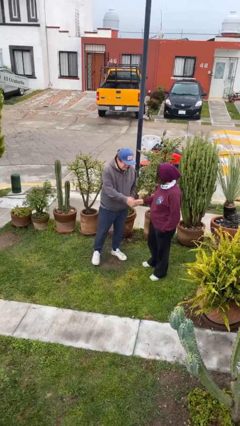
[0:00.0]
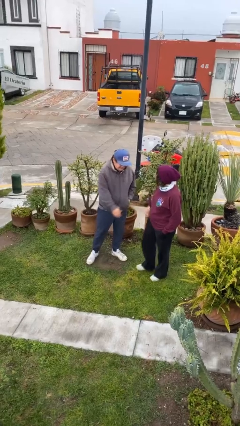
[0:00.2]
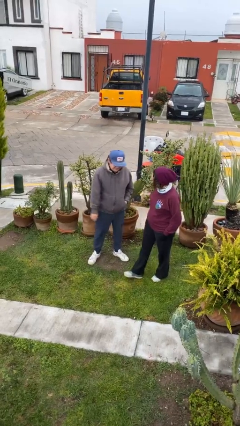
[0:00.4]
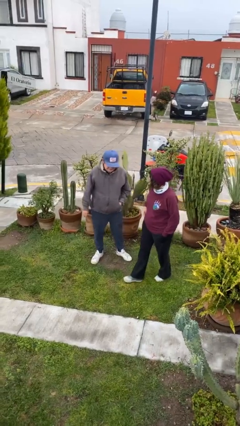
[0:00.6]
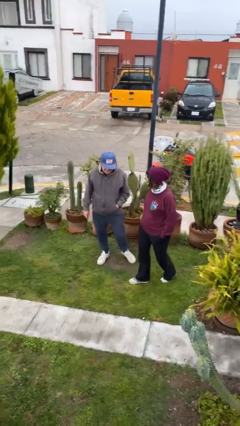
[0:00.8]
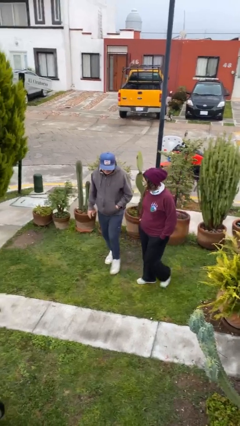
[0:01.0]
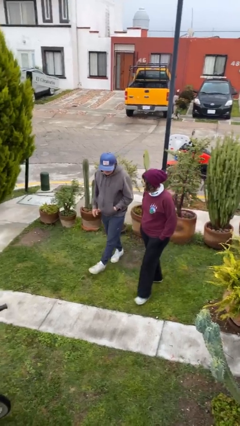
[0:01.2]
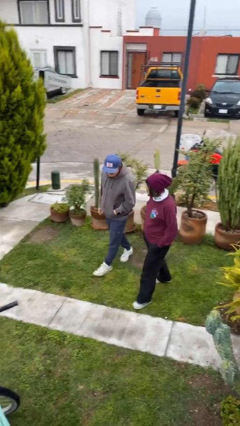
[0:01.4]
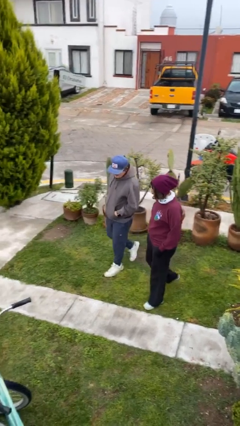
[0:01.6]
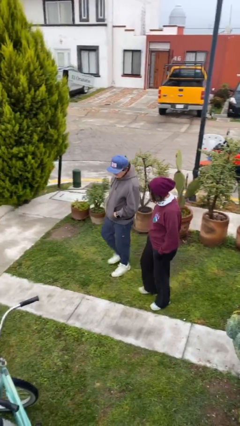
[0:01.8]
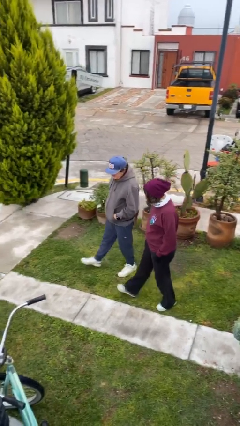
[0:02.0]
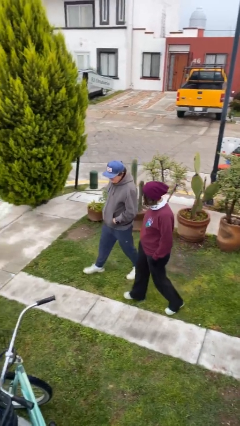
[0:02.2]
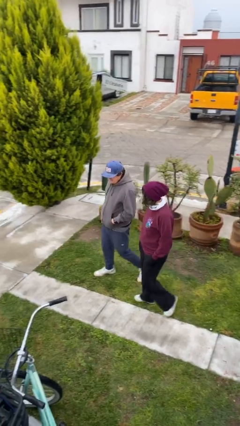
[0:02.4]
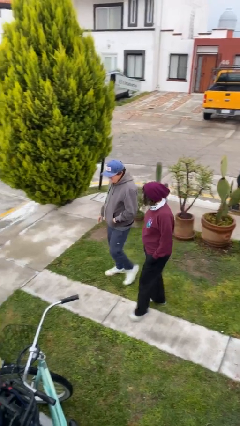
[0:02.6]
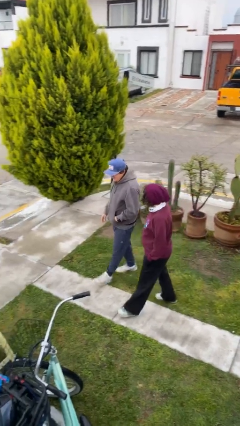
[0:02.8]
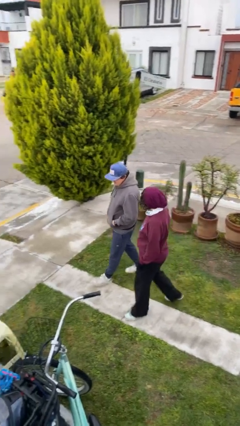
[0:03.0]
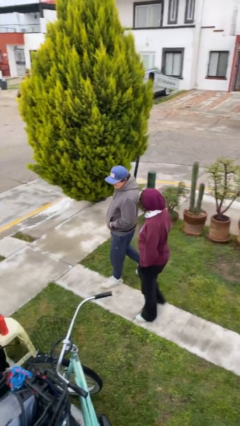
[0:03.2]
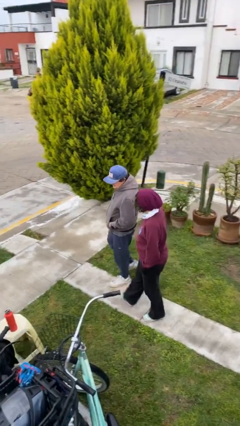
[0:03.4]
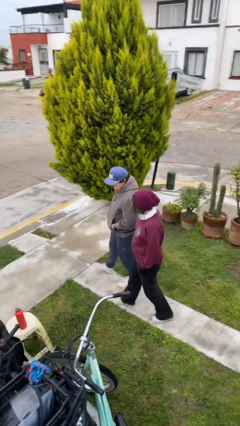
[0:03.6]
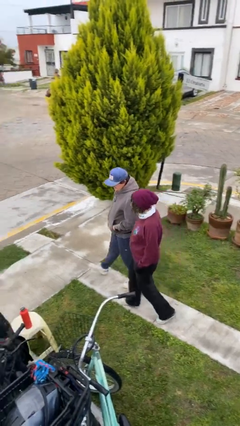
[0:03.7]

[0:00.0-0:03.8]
person talks to person

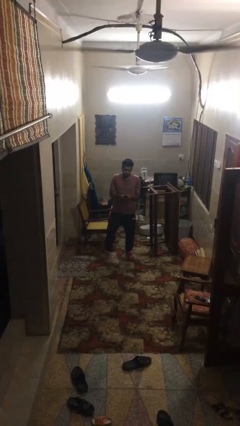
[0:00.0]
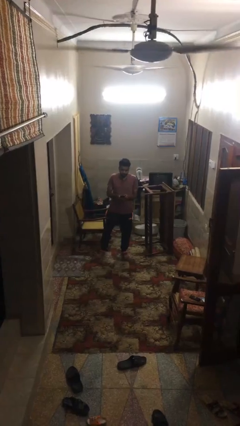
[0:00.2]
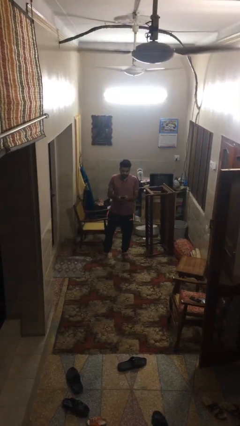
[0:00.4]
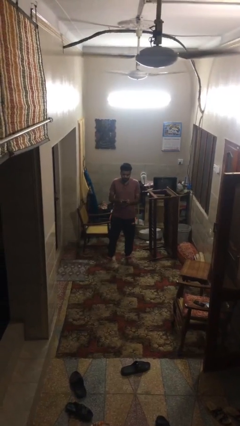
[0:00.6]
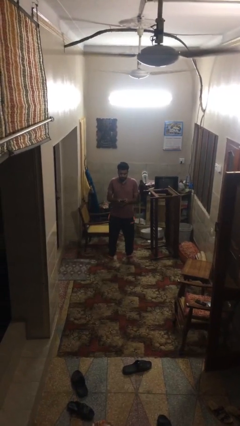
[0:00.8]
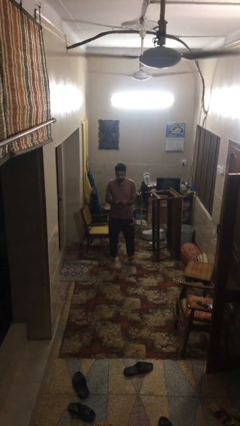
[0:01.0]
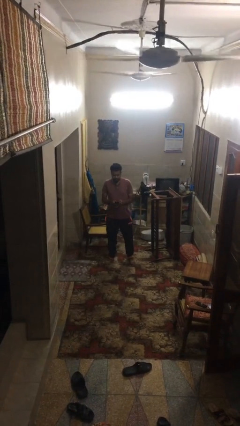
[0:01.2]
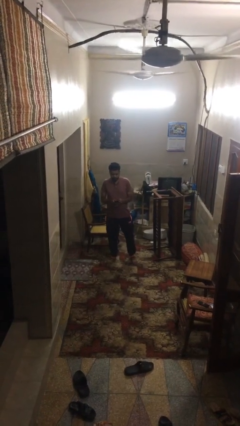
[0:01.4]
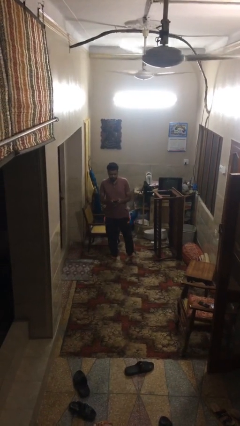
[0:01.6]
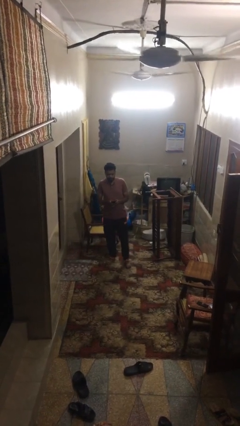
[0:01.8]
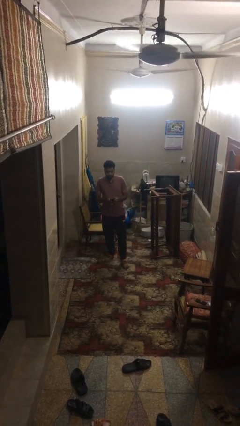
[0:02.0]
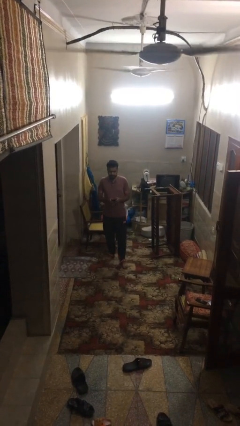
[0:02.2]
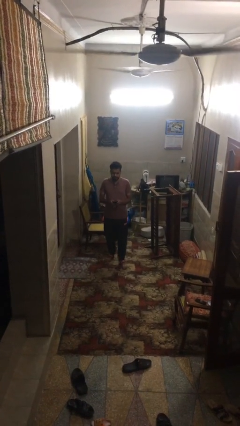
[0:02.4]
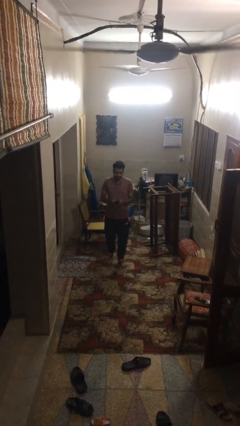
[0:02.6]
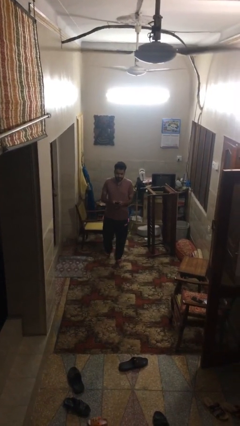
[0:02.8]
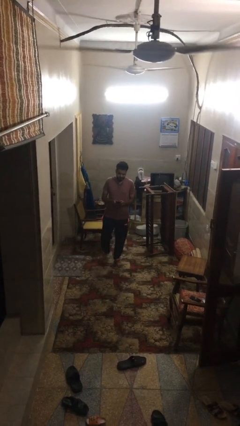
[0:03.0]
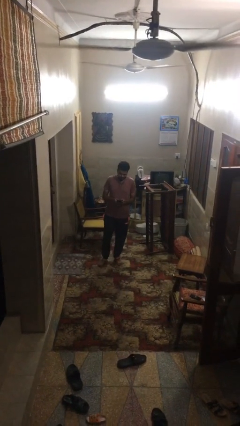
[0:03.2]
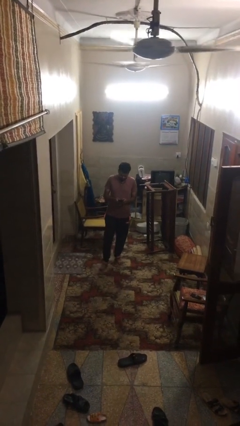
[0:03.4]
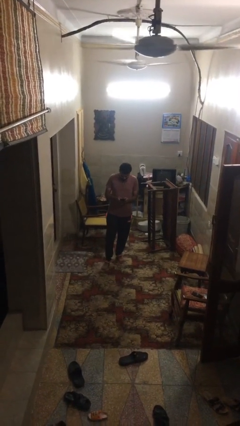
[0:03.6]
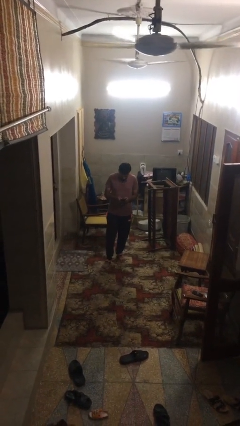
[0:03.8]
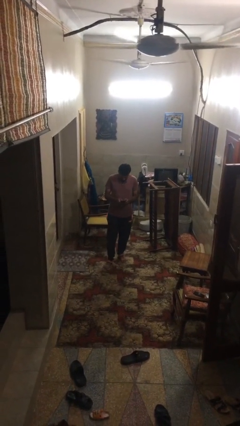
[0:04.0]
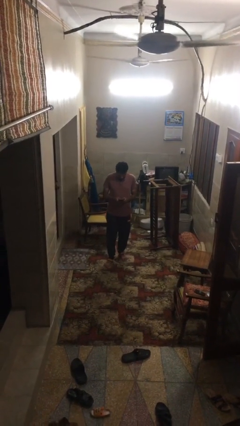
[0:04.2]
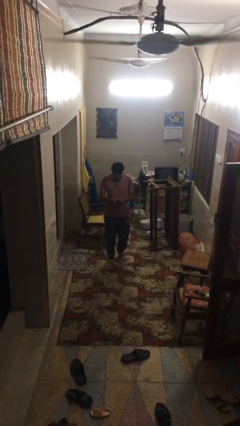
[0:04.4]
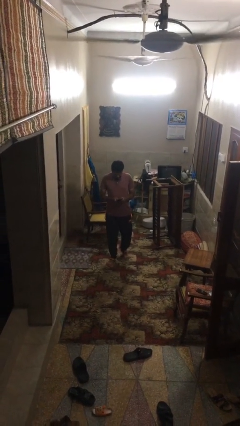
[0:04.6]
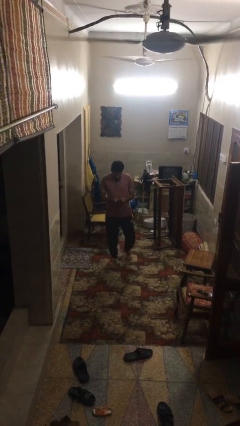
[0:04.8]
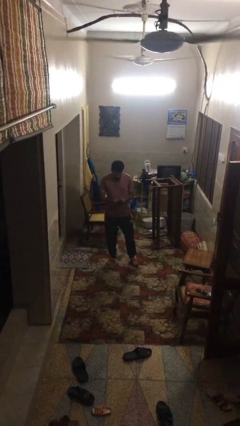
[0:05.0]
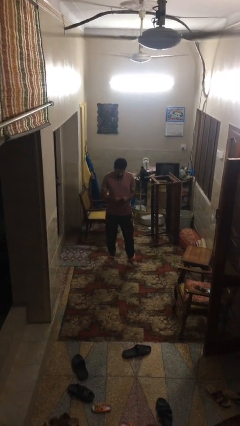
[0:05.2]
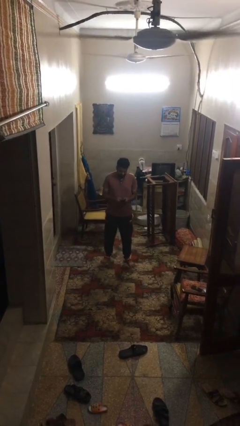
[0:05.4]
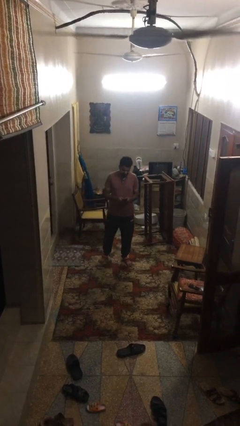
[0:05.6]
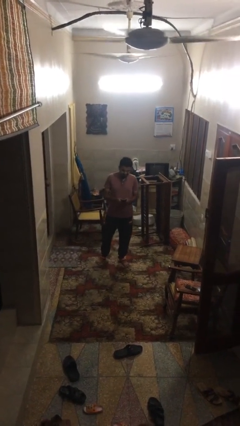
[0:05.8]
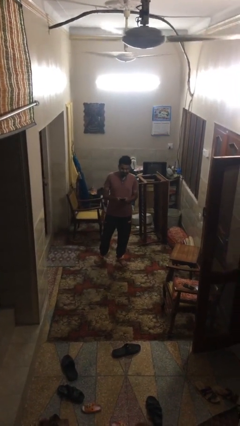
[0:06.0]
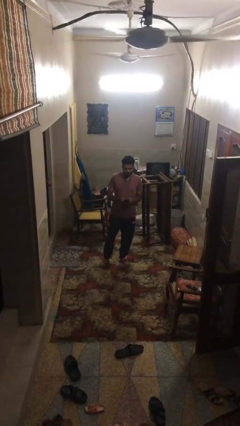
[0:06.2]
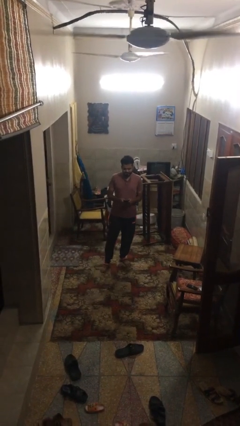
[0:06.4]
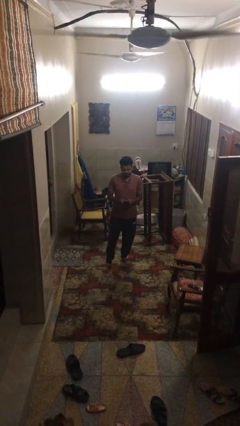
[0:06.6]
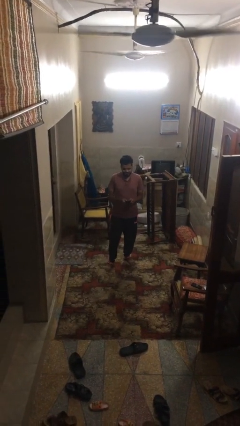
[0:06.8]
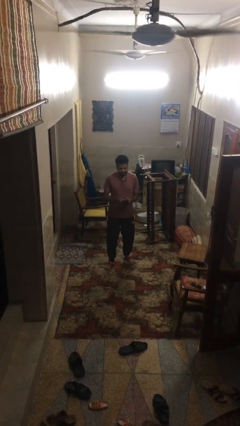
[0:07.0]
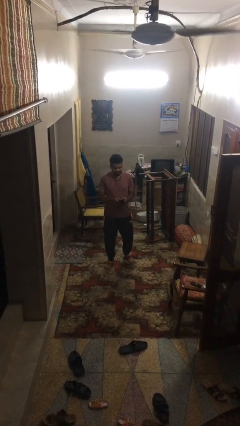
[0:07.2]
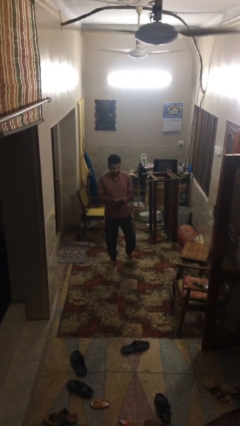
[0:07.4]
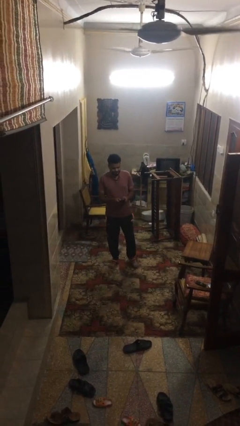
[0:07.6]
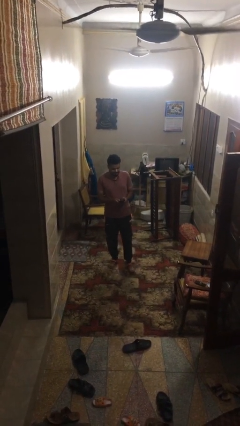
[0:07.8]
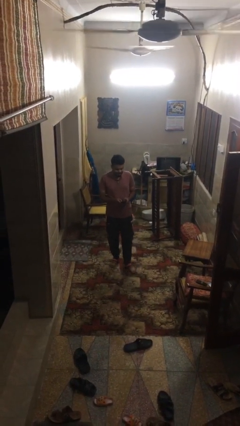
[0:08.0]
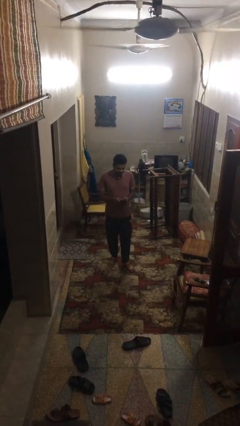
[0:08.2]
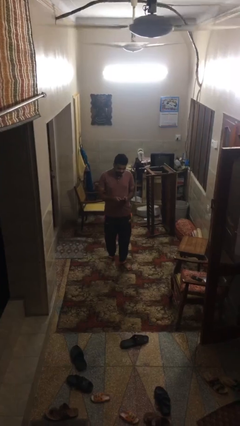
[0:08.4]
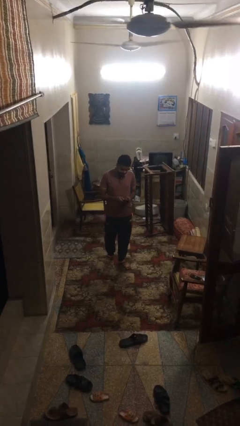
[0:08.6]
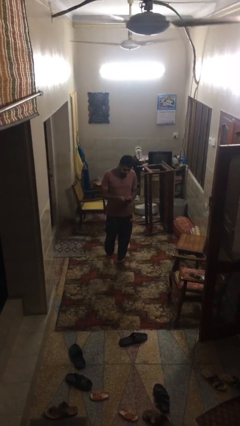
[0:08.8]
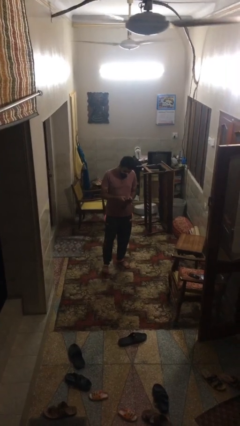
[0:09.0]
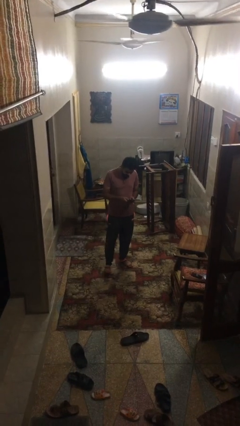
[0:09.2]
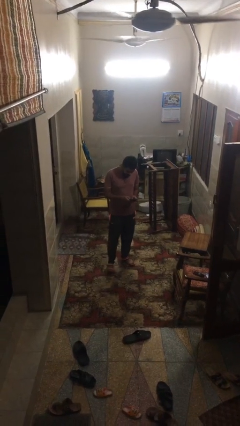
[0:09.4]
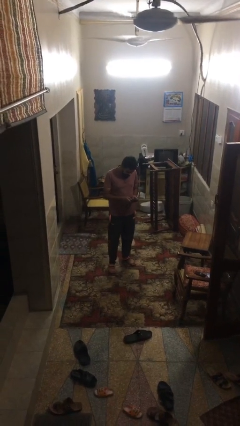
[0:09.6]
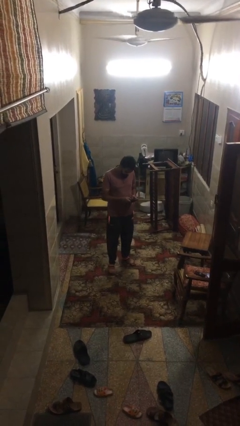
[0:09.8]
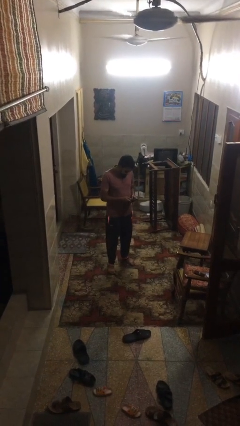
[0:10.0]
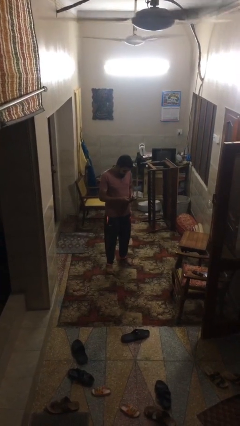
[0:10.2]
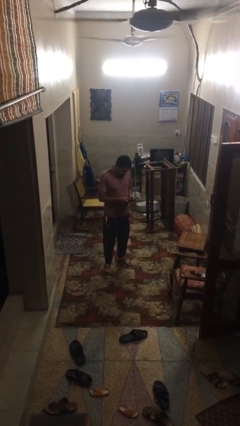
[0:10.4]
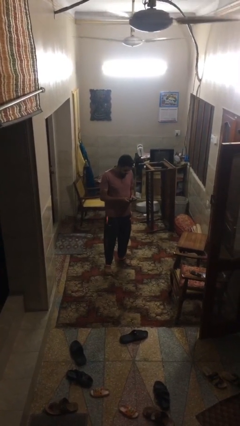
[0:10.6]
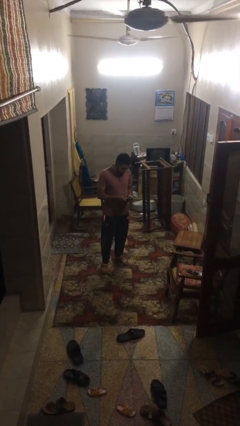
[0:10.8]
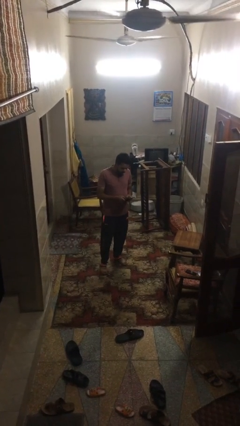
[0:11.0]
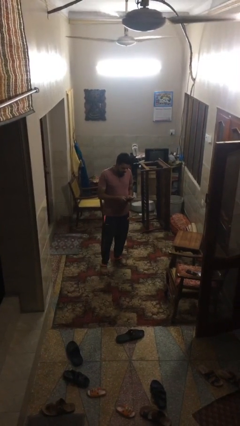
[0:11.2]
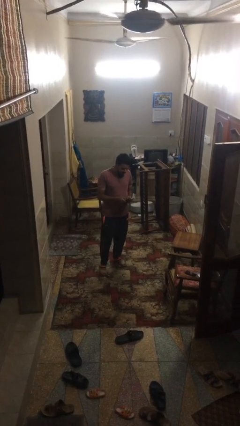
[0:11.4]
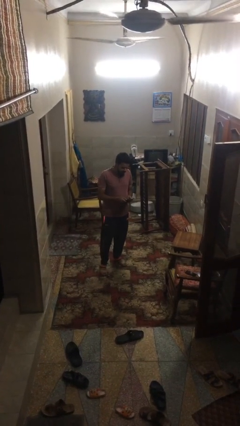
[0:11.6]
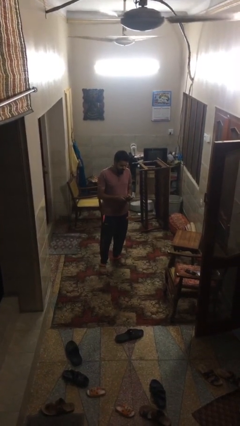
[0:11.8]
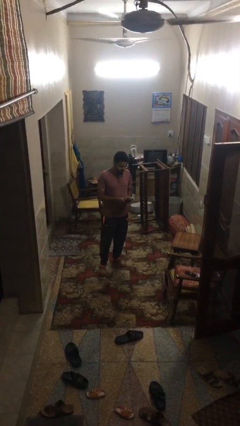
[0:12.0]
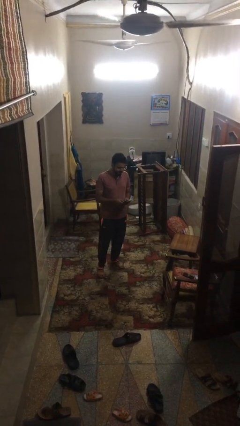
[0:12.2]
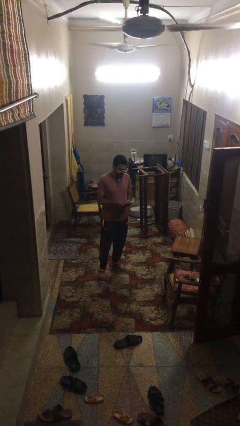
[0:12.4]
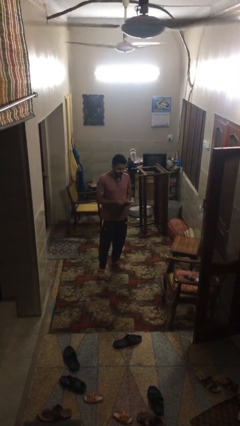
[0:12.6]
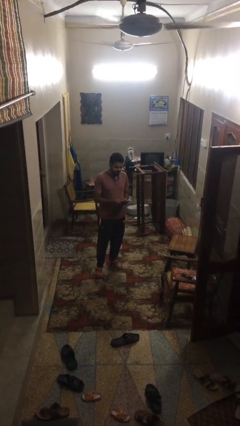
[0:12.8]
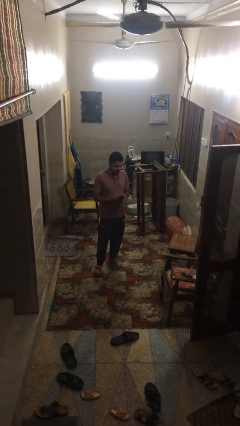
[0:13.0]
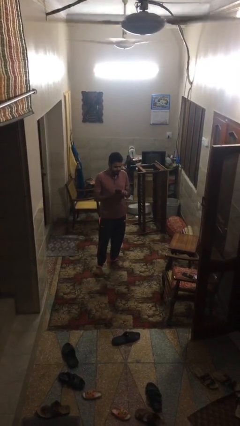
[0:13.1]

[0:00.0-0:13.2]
person texts on phone

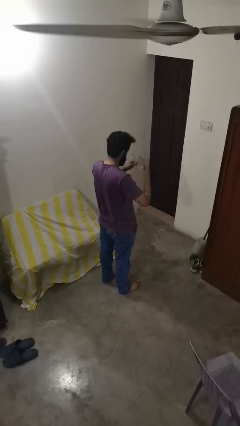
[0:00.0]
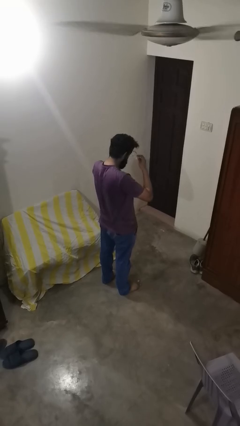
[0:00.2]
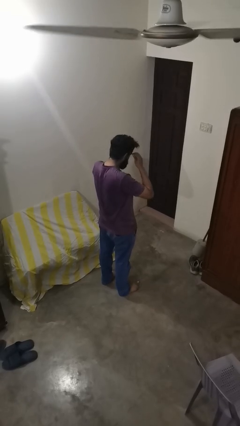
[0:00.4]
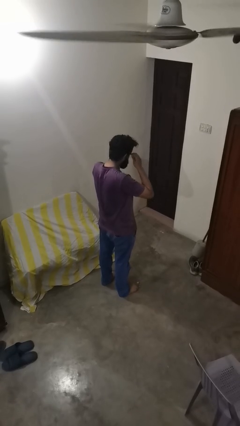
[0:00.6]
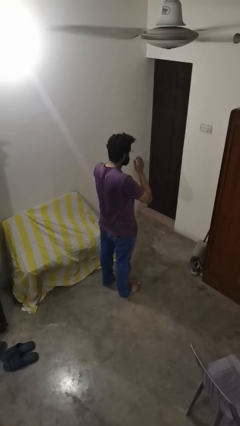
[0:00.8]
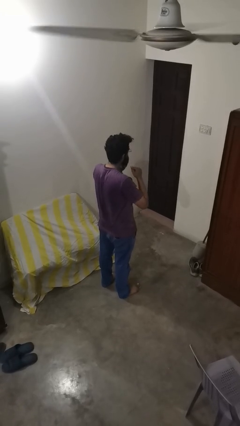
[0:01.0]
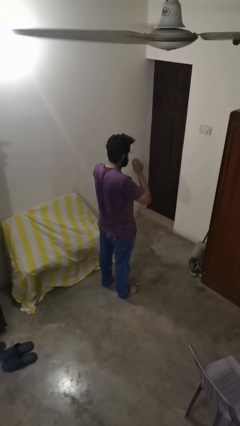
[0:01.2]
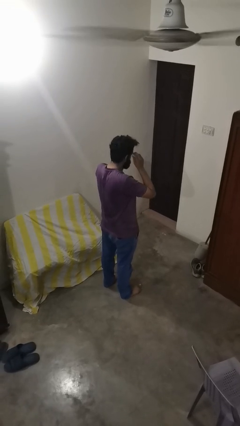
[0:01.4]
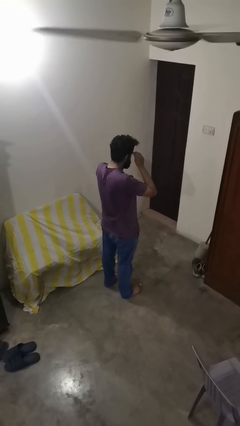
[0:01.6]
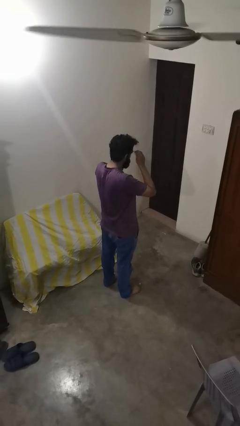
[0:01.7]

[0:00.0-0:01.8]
person puts on glasses
